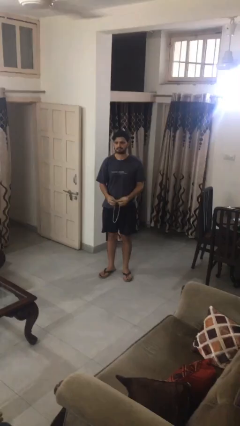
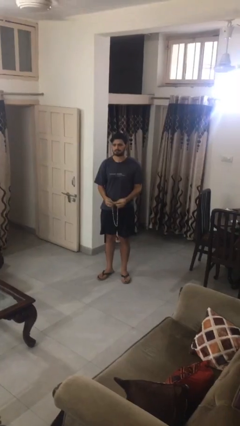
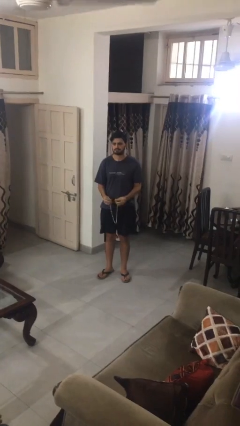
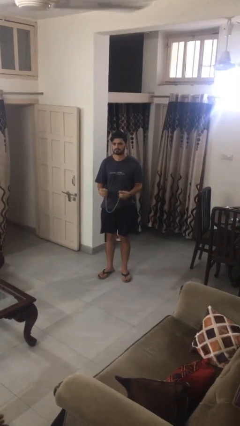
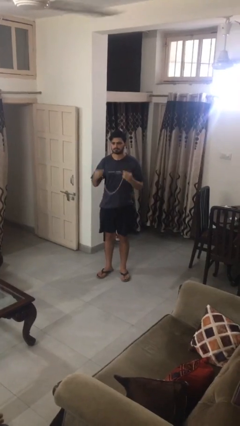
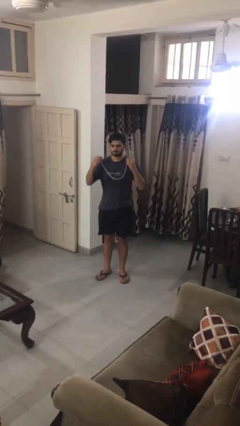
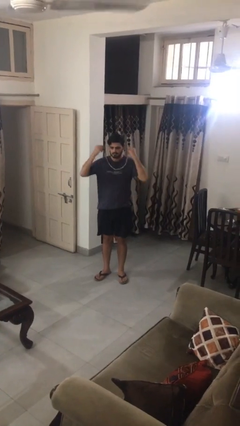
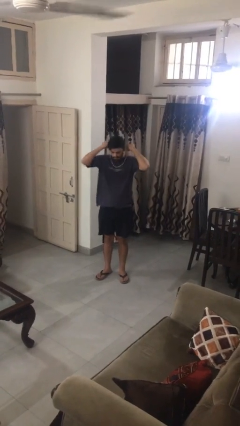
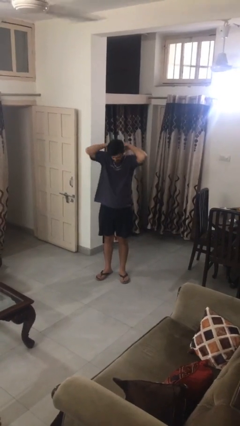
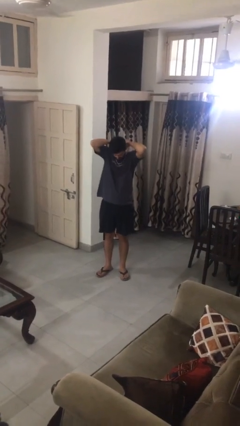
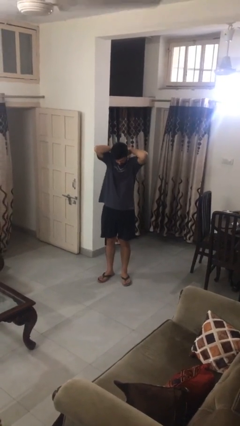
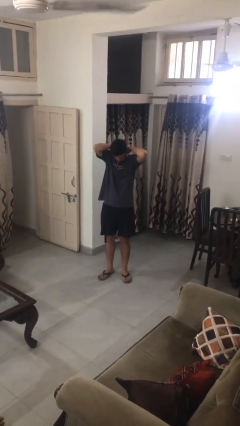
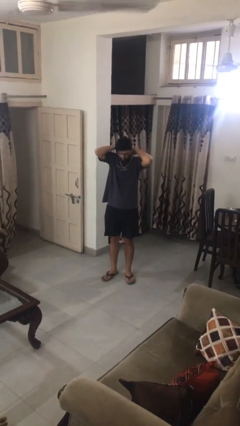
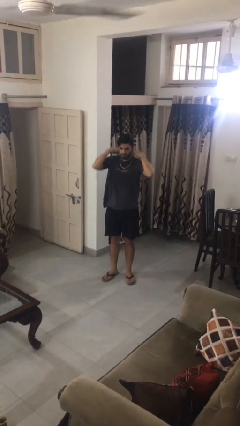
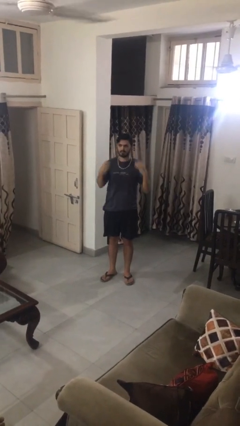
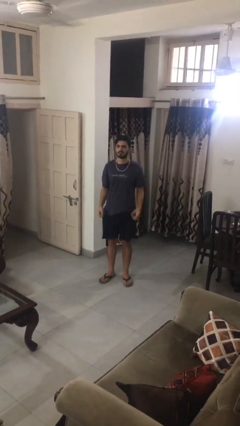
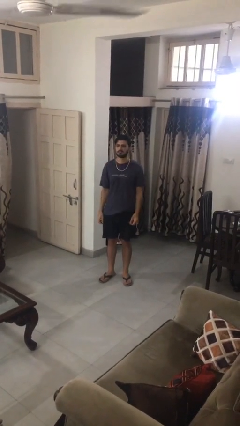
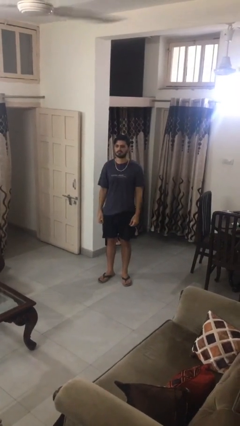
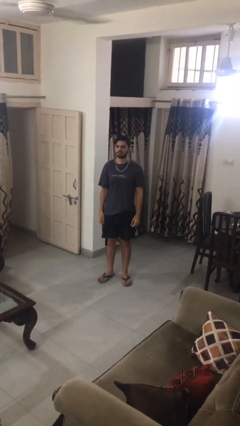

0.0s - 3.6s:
person puts on necklace

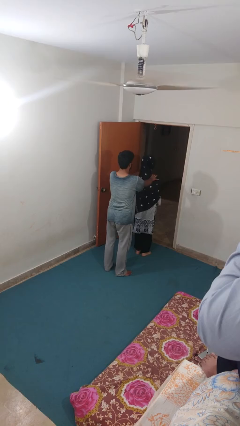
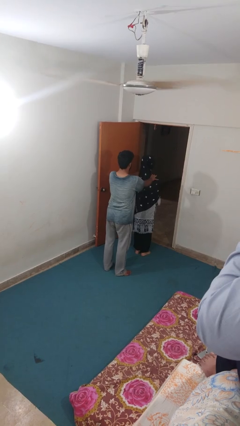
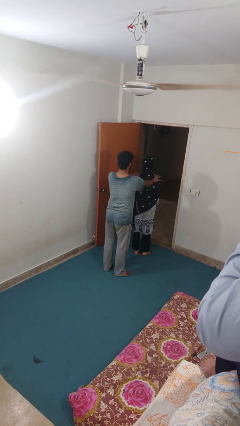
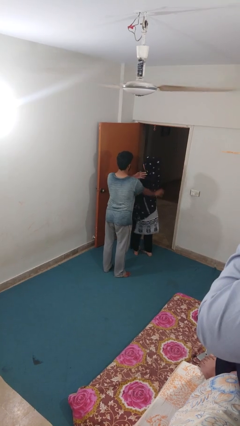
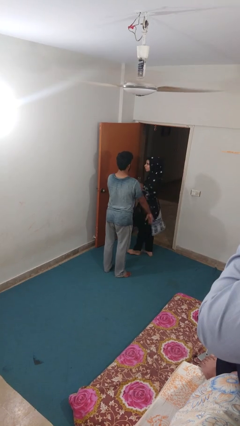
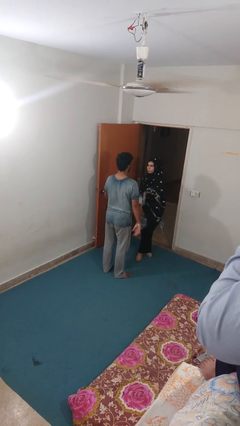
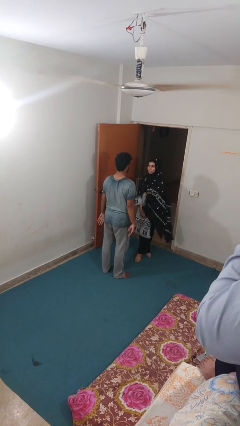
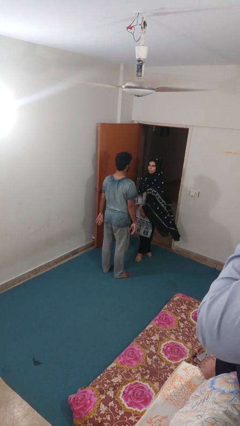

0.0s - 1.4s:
person spins person around

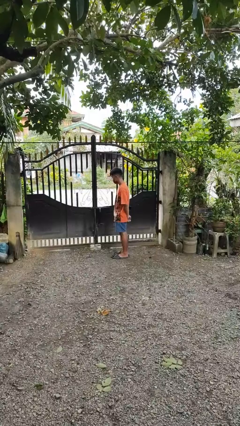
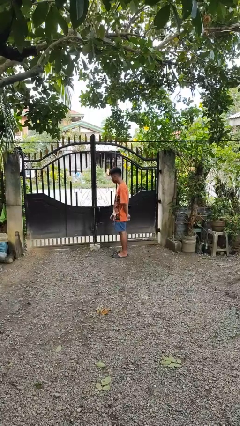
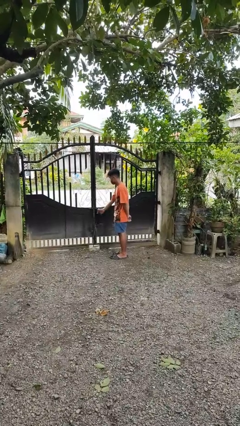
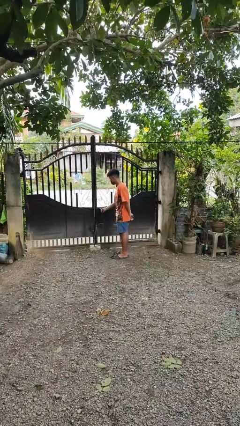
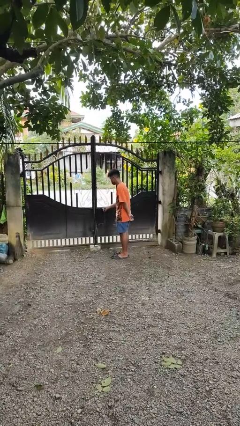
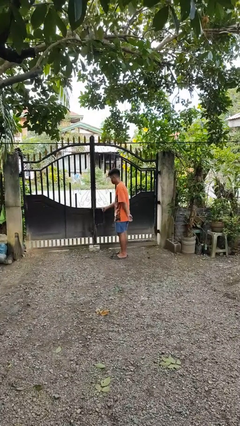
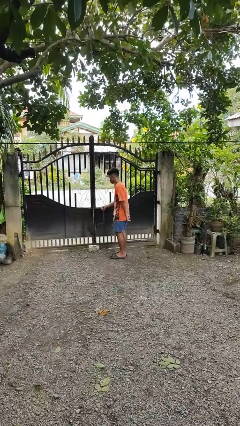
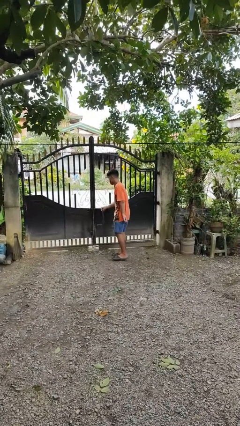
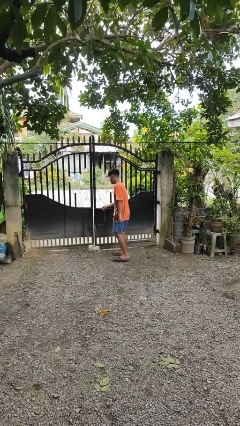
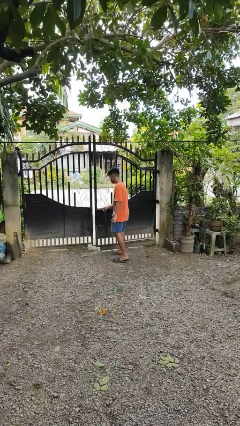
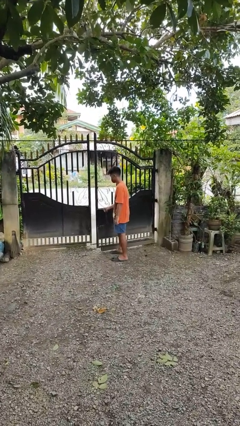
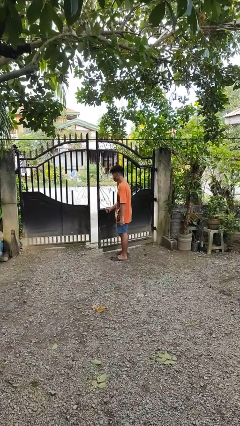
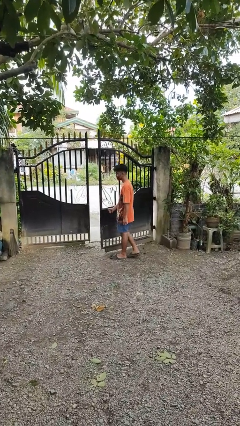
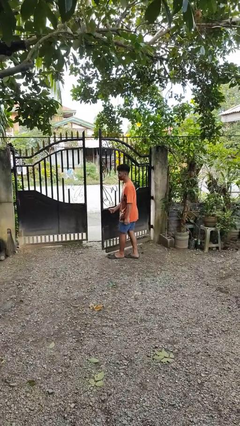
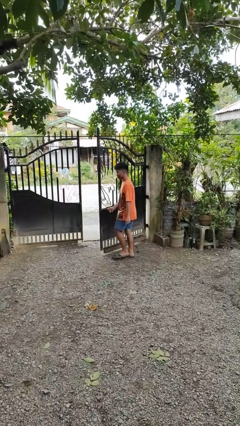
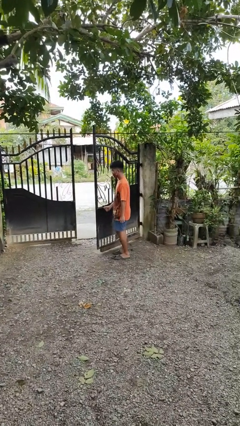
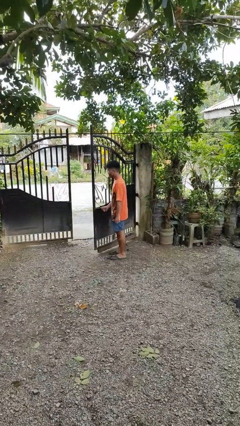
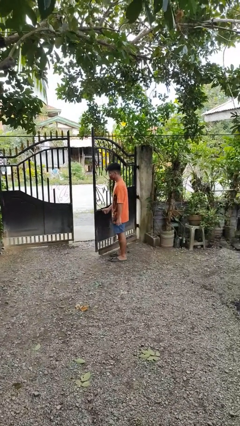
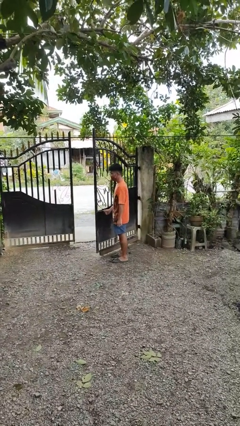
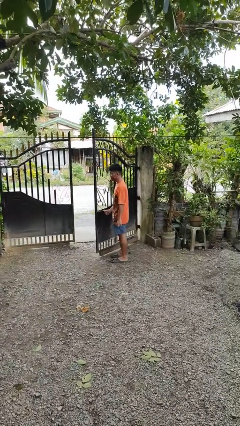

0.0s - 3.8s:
person opens gate

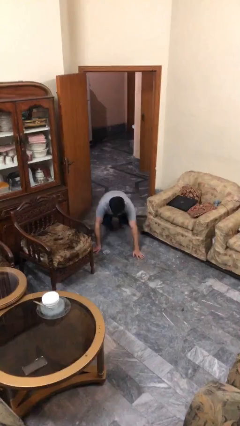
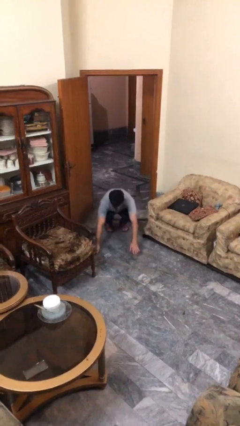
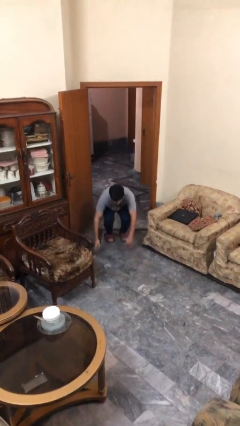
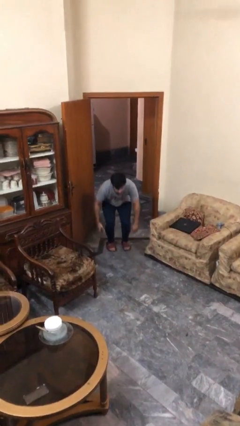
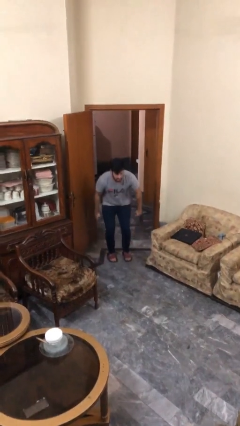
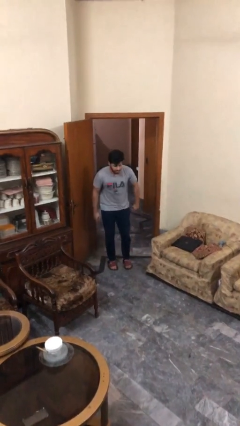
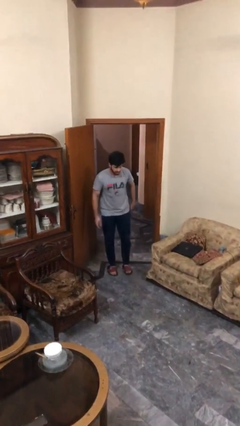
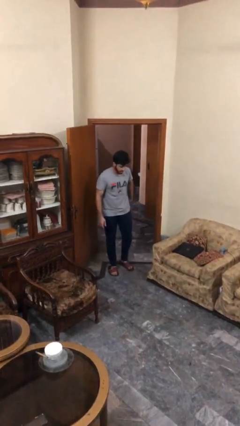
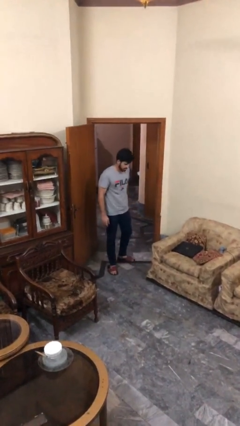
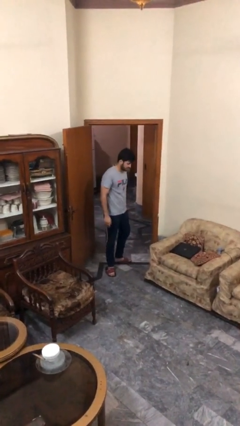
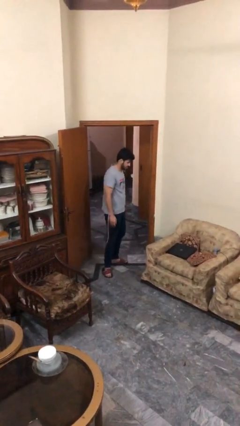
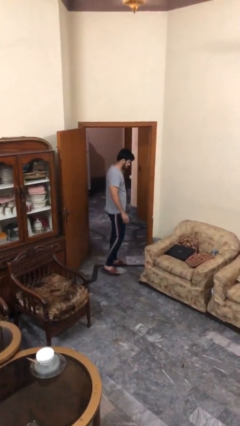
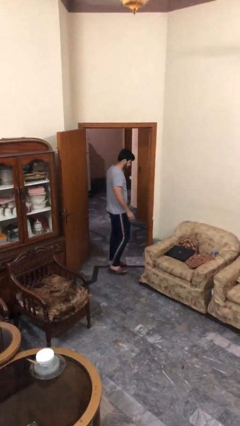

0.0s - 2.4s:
person stands up from floor

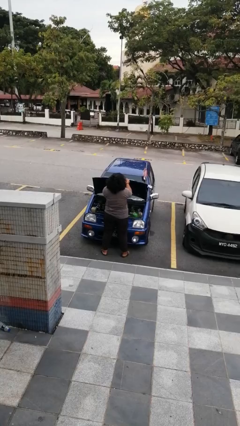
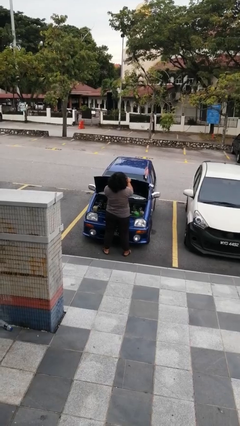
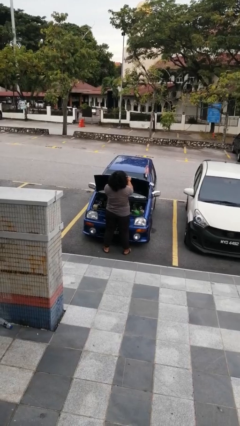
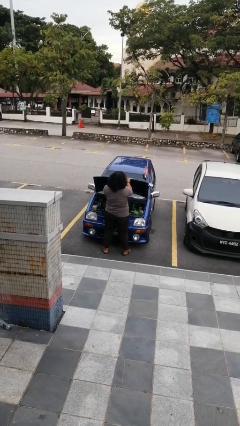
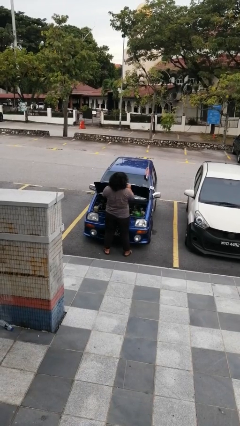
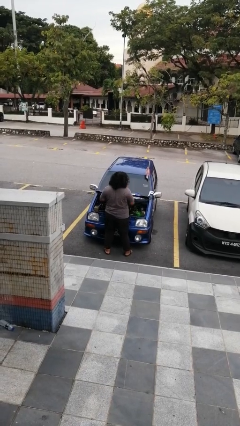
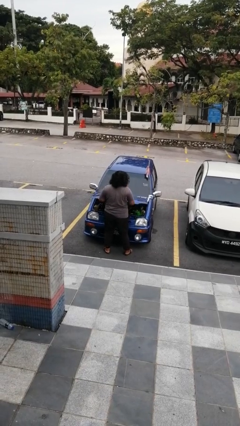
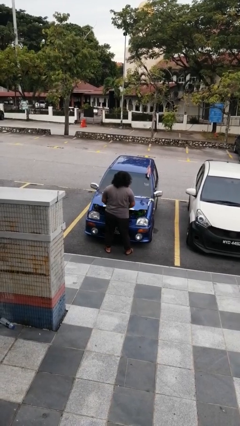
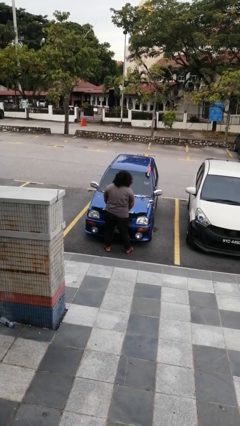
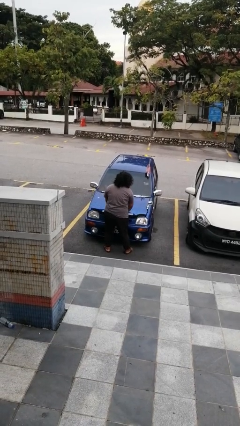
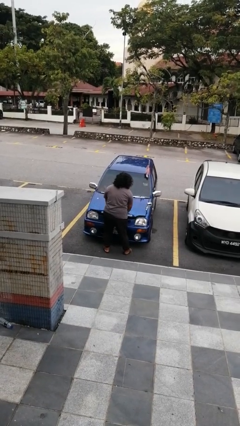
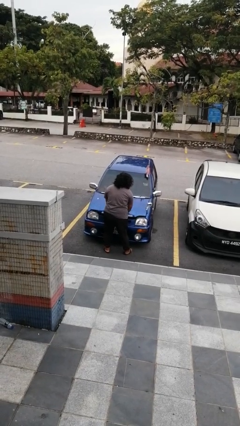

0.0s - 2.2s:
person closes car hood

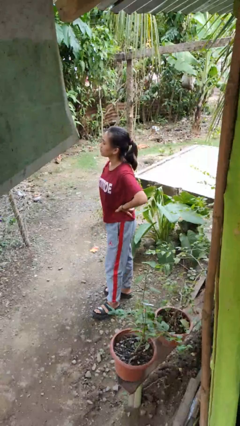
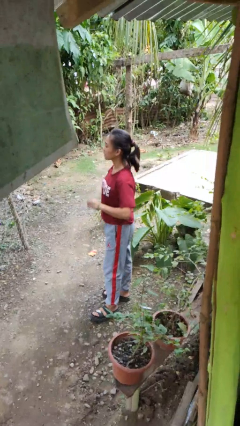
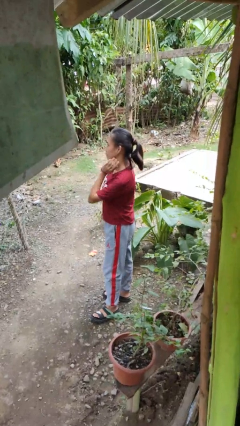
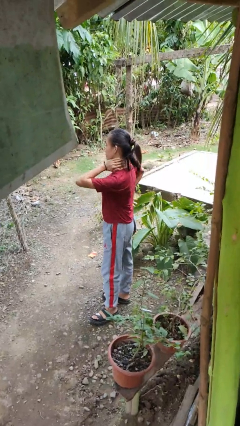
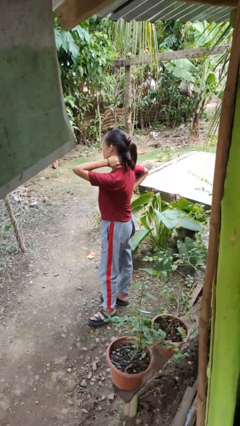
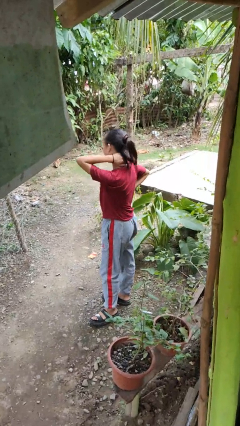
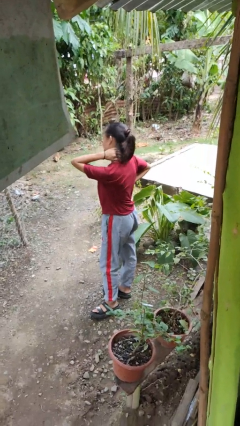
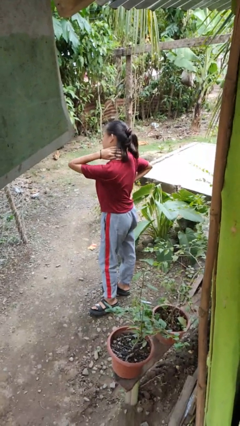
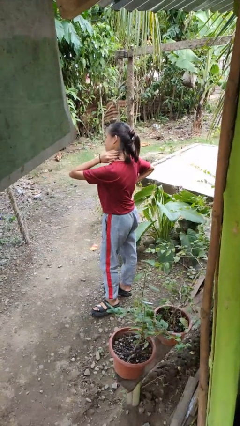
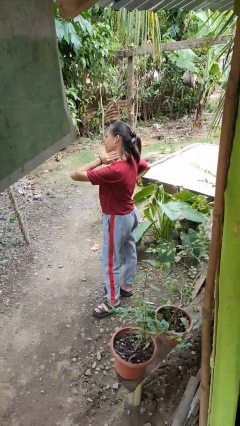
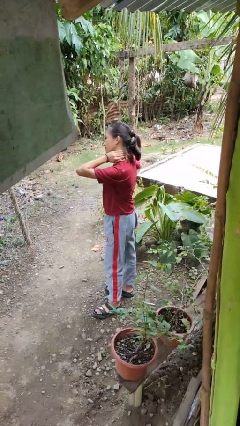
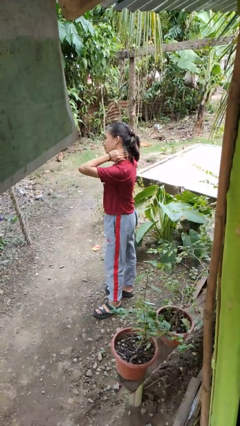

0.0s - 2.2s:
person rubs neck

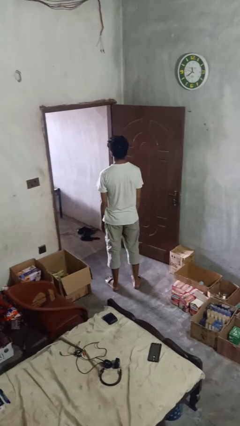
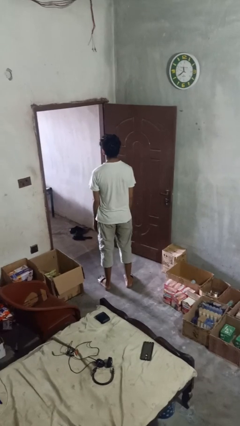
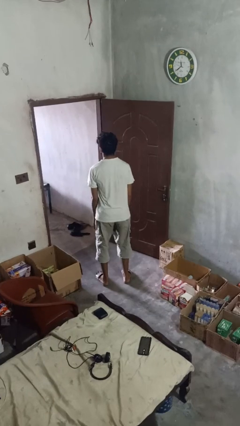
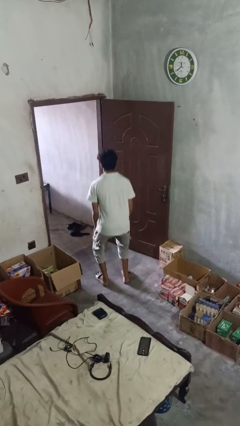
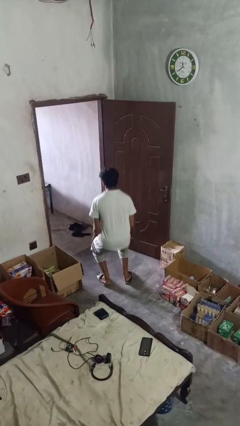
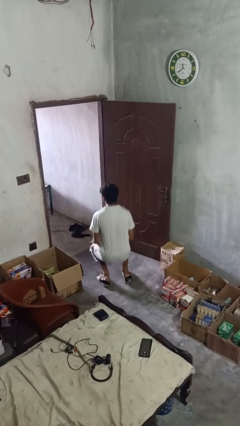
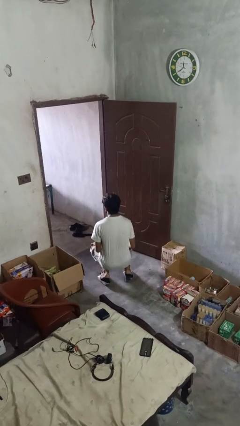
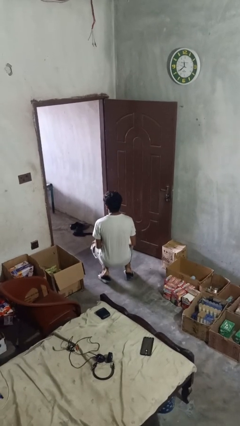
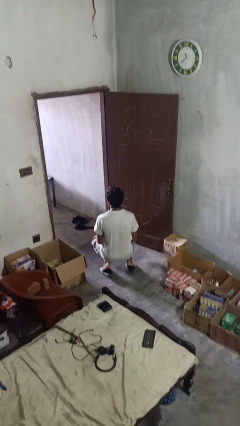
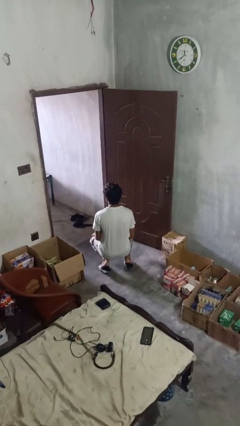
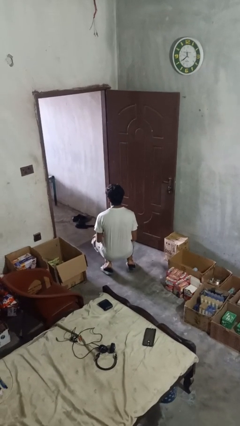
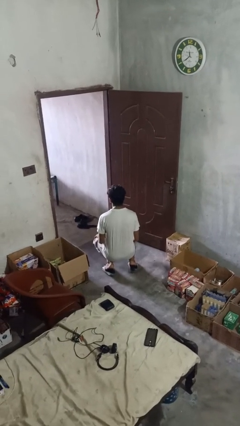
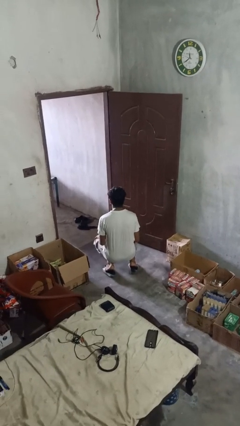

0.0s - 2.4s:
person kneels
